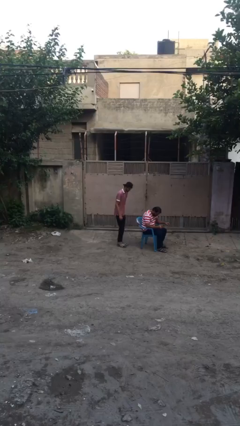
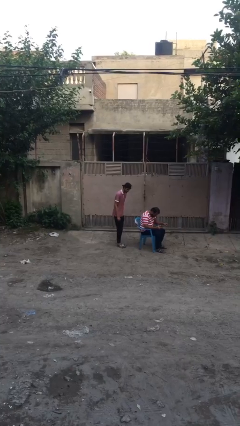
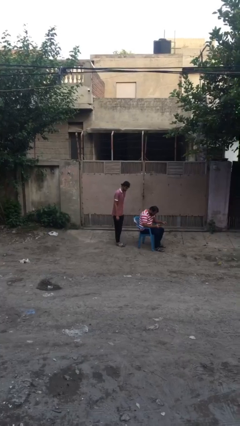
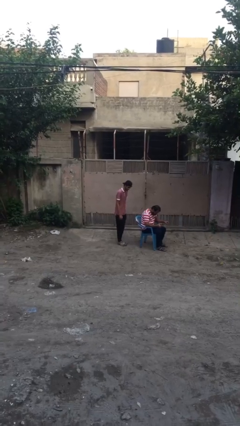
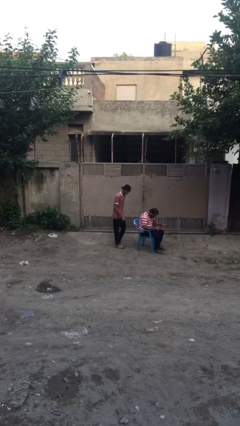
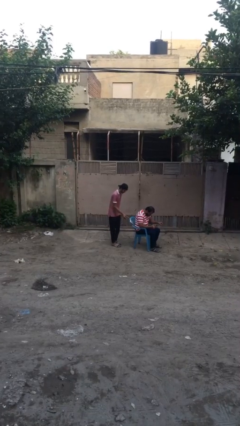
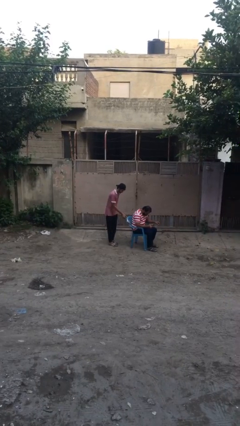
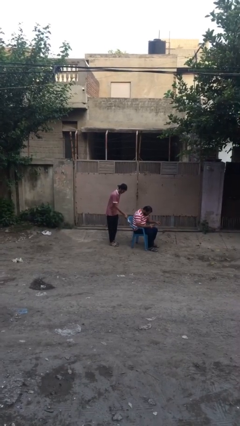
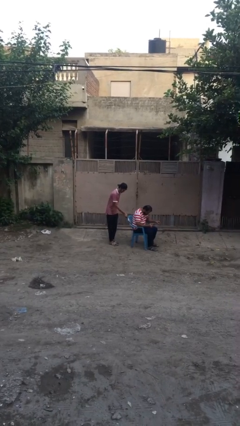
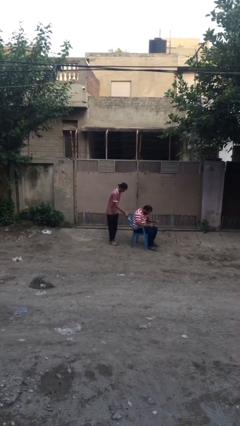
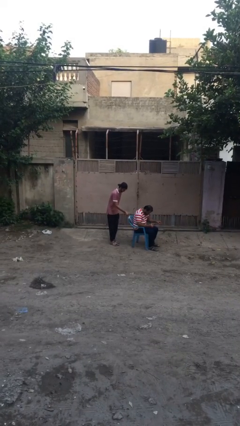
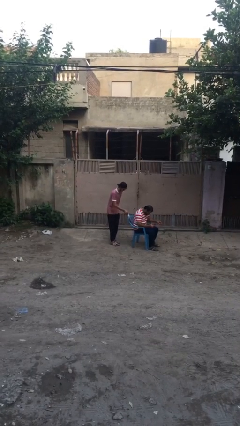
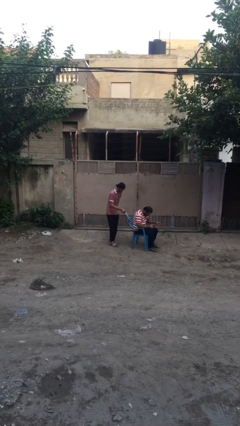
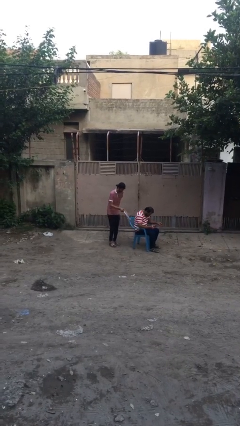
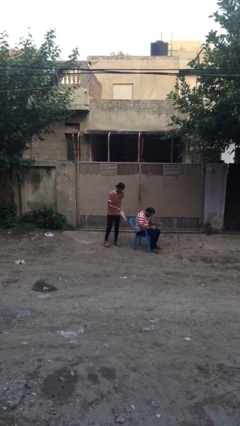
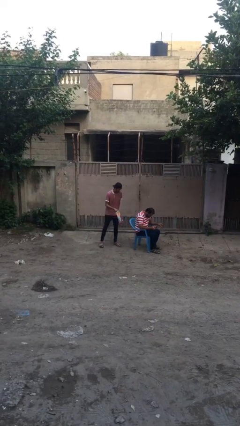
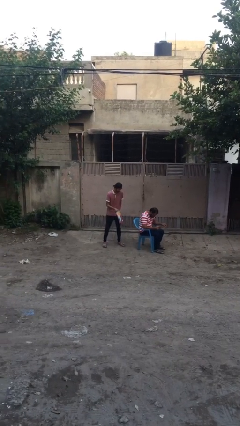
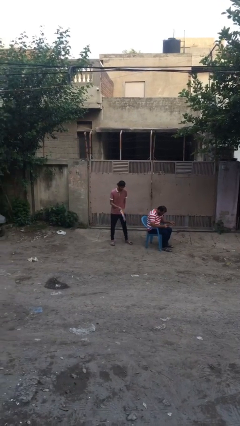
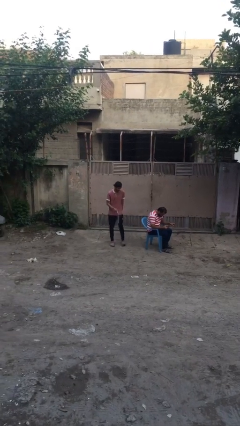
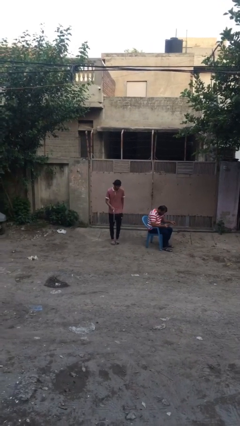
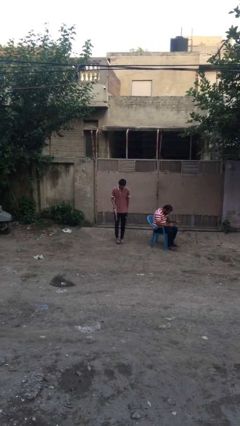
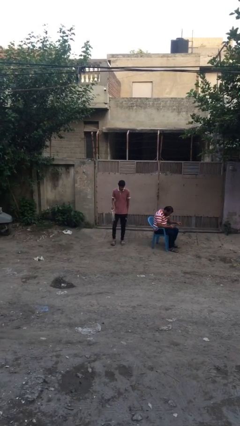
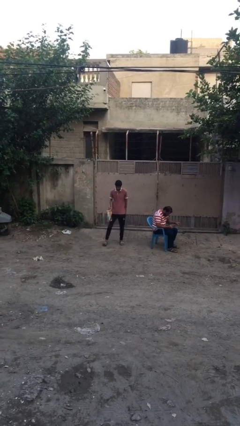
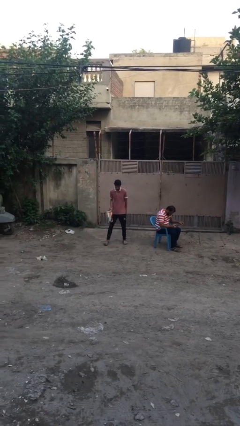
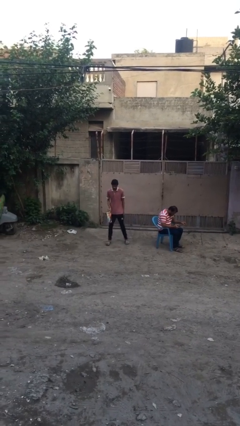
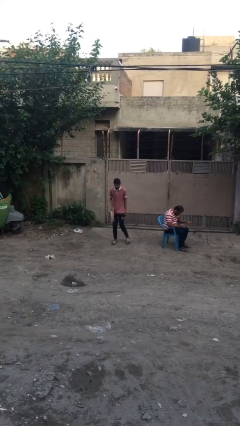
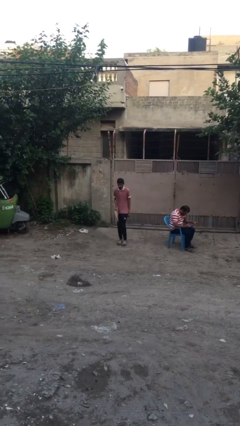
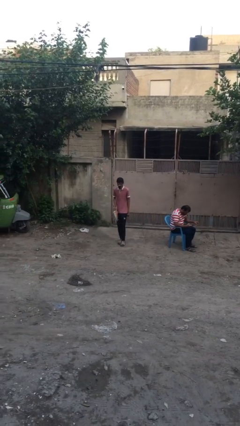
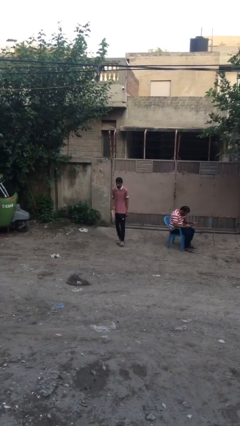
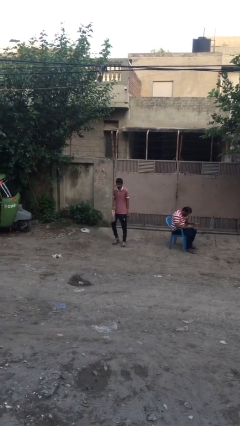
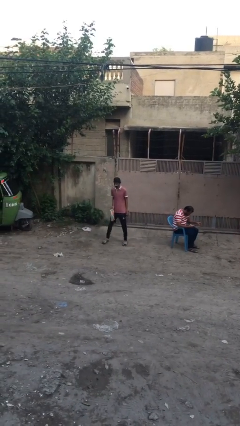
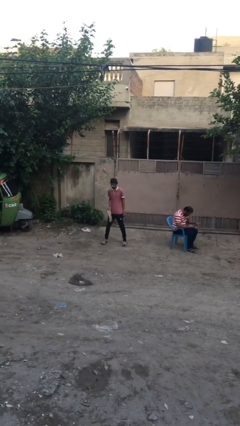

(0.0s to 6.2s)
person steals object from person

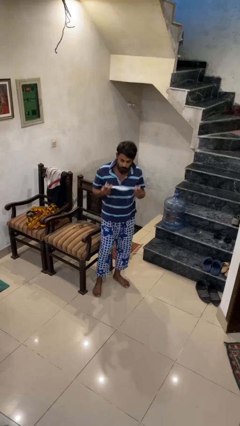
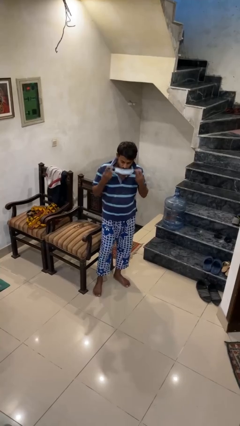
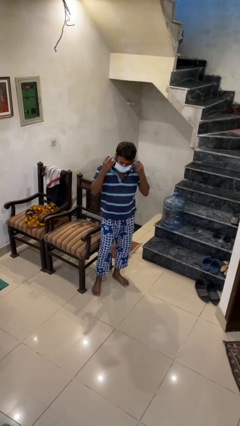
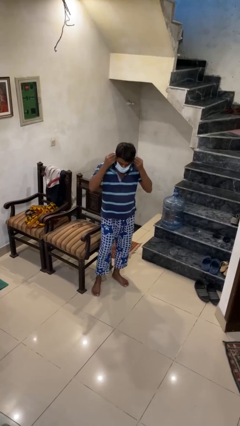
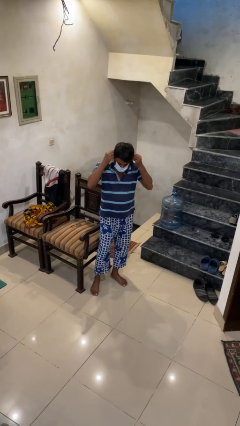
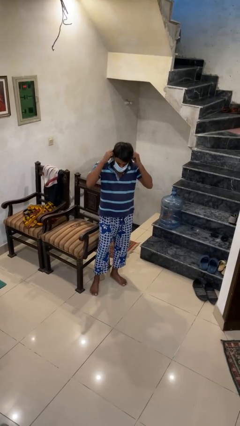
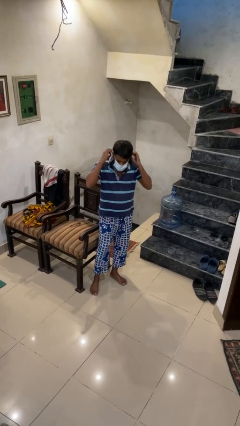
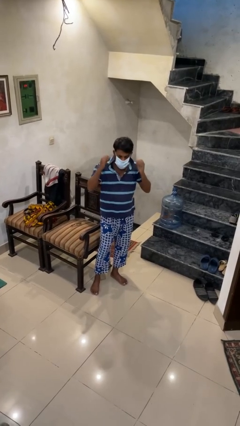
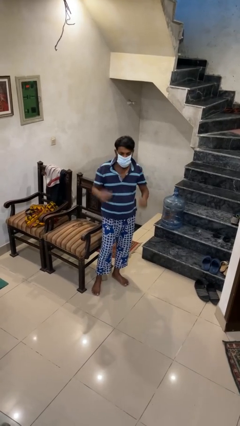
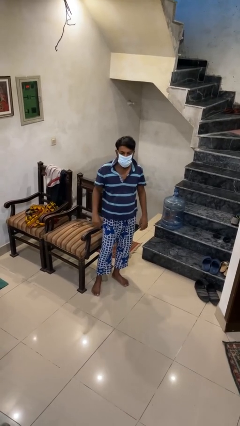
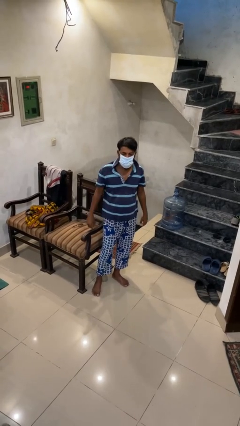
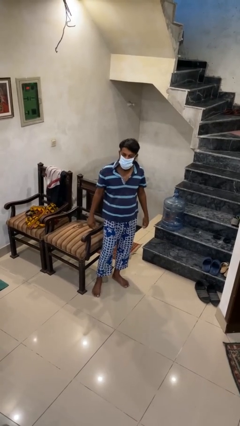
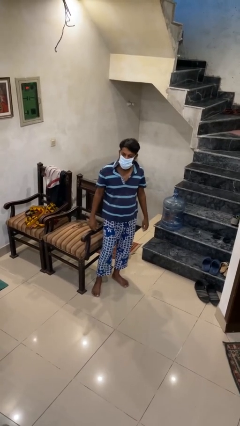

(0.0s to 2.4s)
person puts on facemask

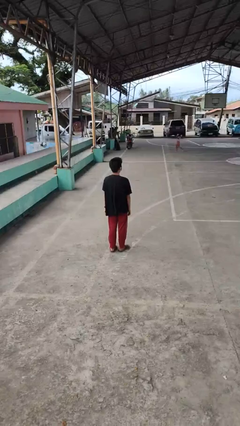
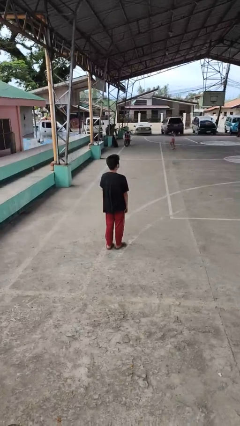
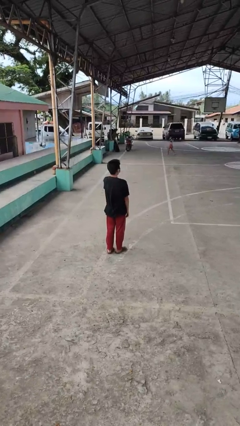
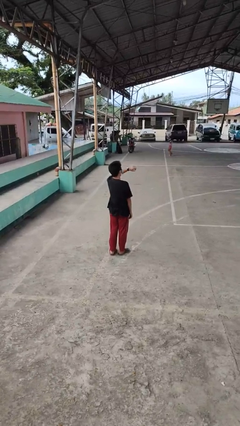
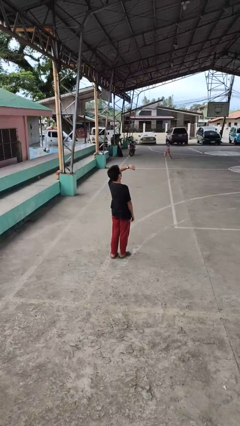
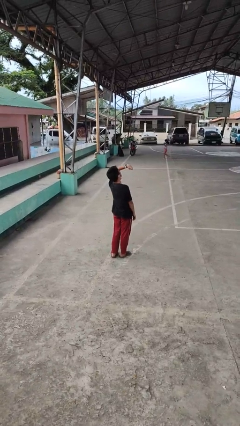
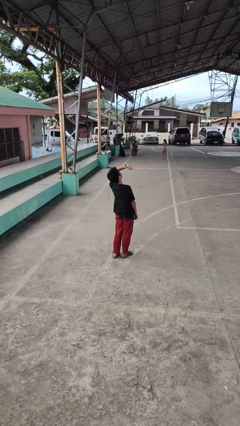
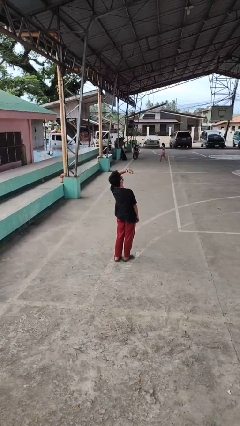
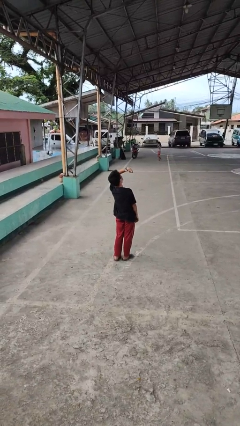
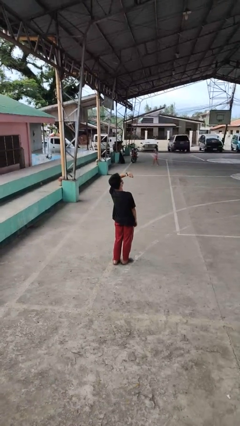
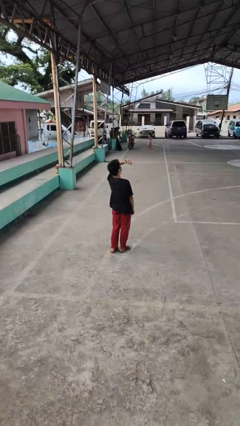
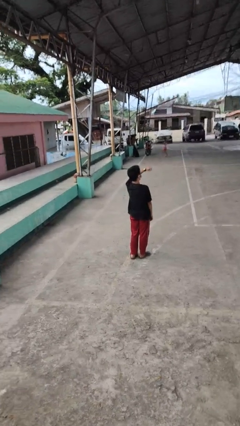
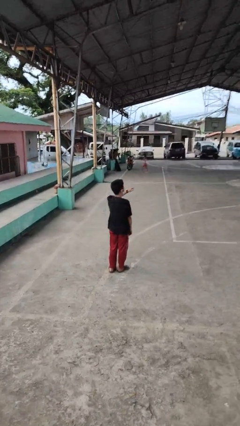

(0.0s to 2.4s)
person looks at wristwatch

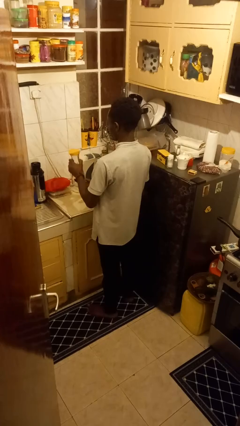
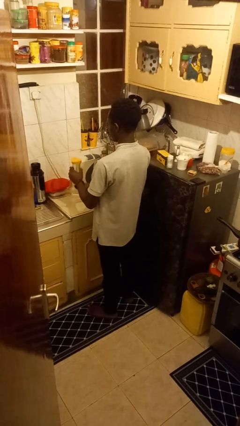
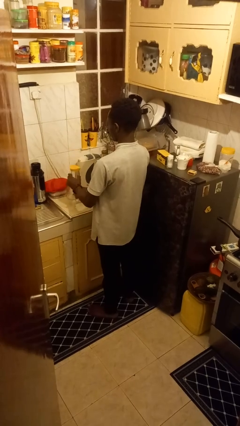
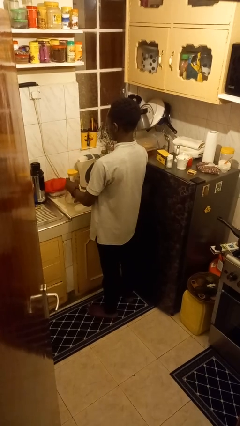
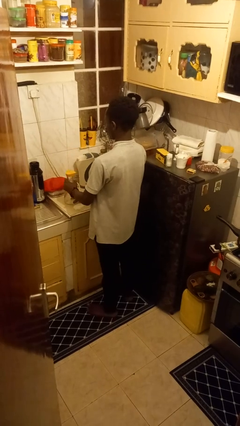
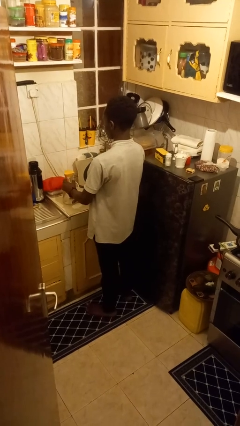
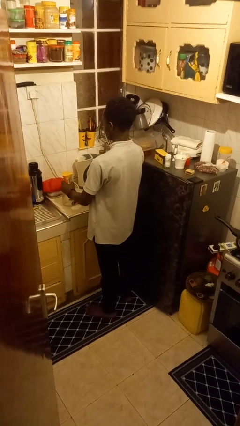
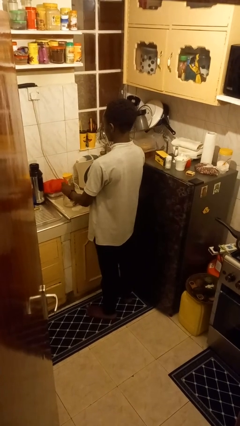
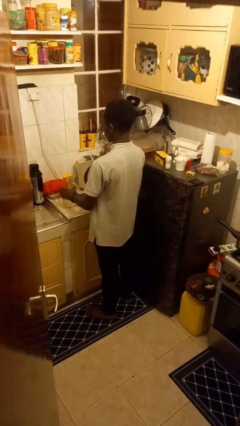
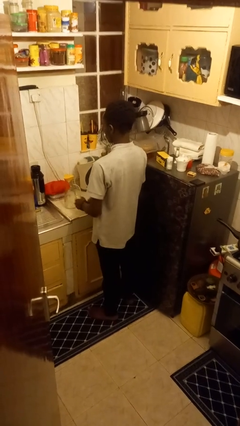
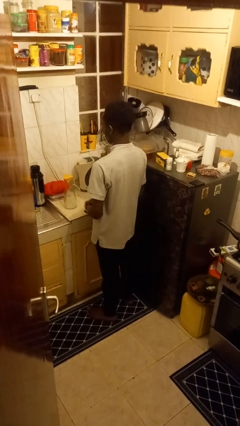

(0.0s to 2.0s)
person puts down object on countertop

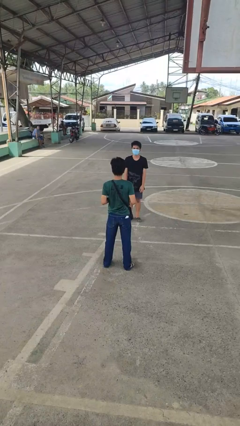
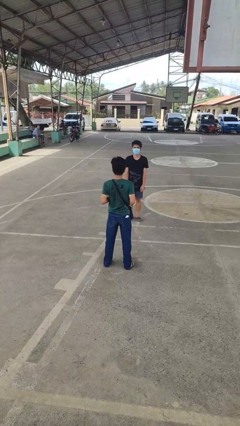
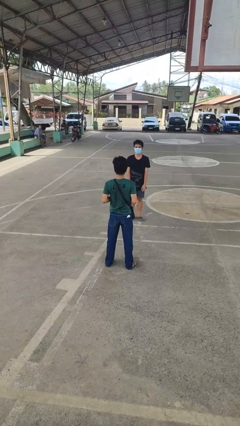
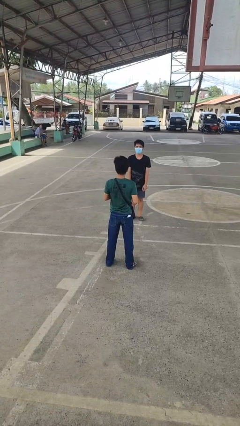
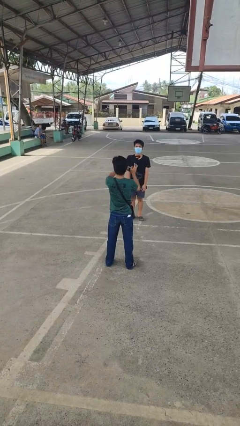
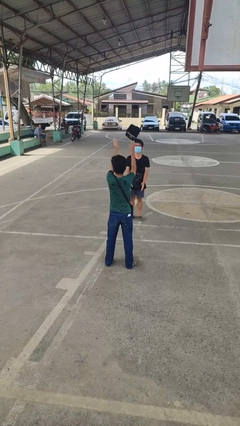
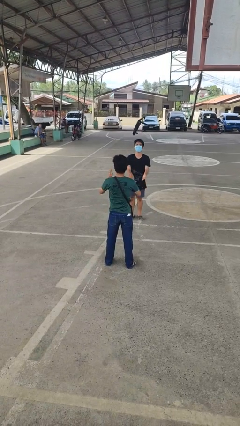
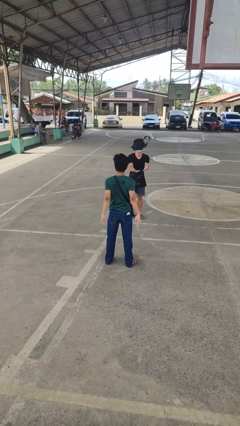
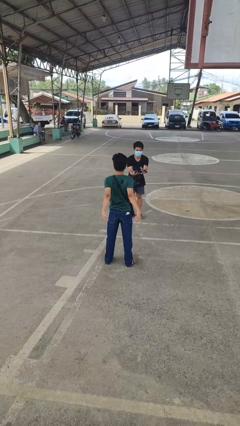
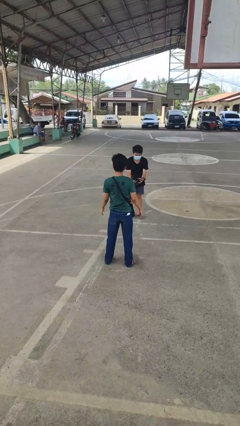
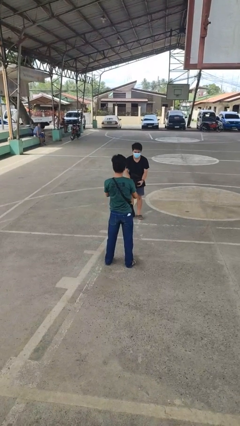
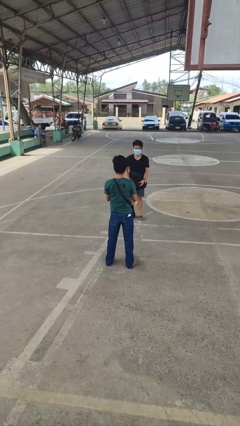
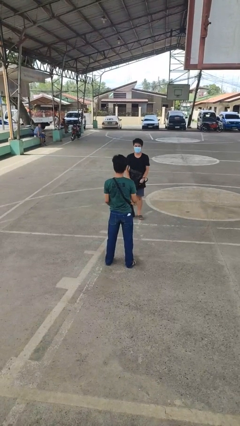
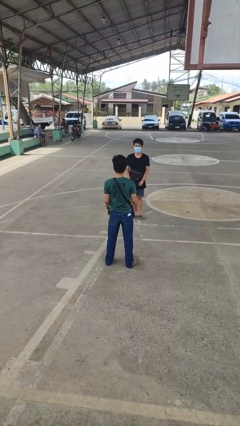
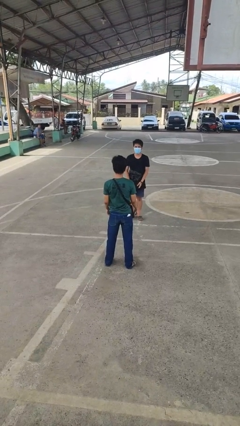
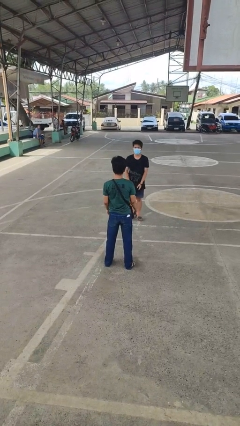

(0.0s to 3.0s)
person throws object to person

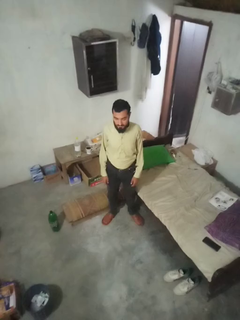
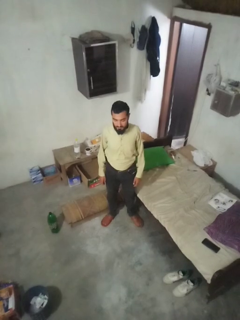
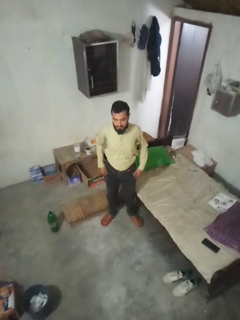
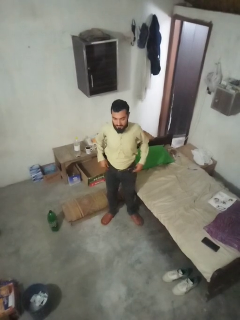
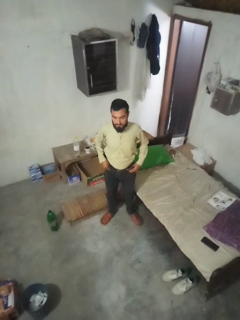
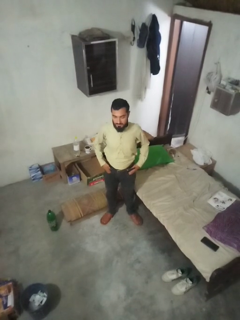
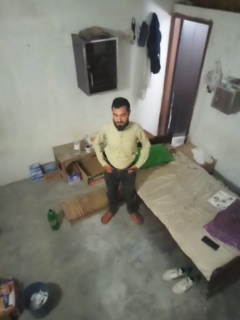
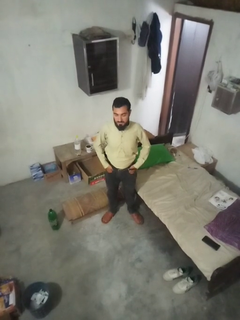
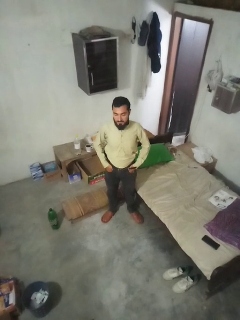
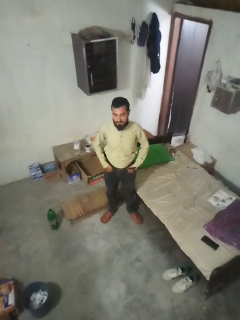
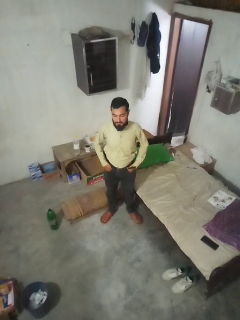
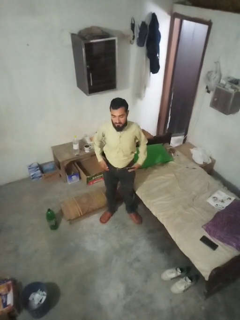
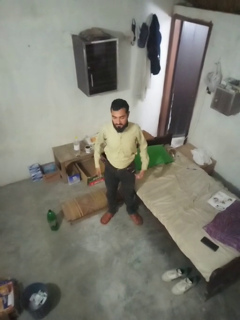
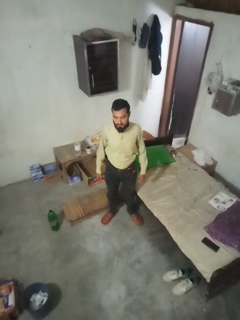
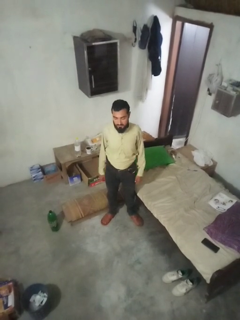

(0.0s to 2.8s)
person puts hands in back pockets
